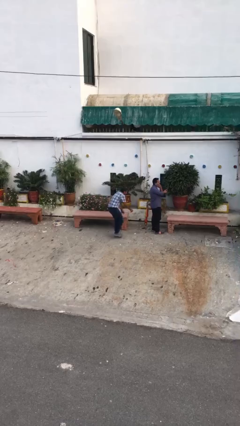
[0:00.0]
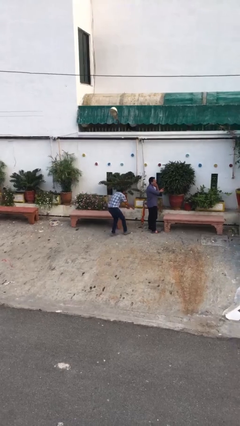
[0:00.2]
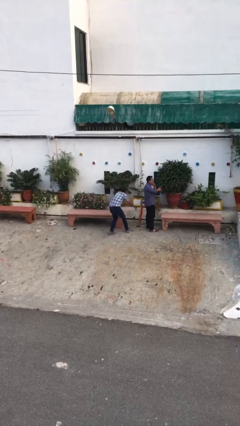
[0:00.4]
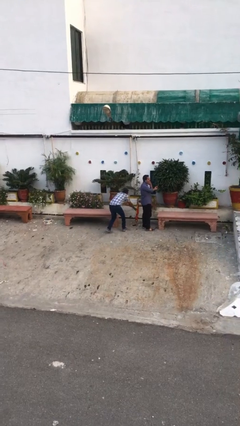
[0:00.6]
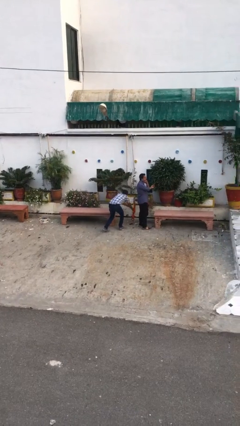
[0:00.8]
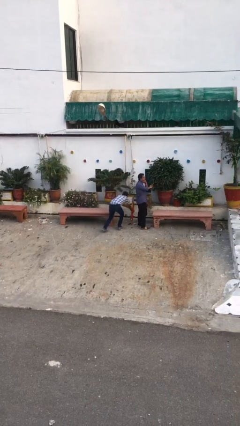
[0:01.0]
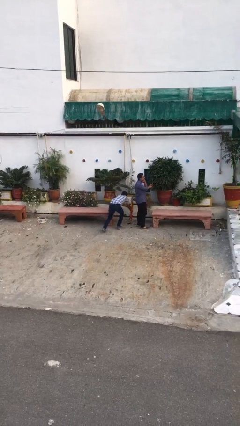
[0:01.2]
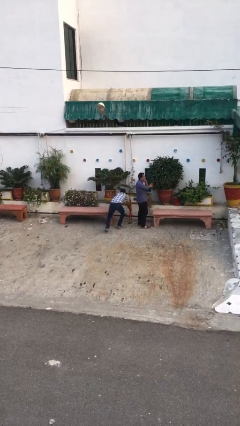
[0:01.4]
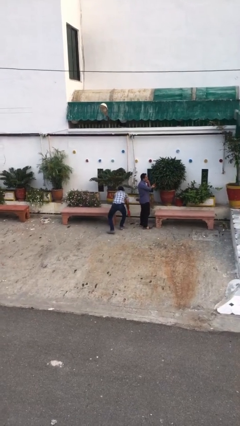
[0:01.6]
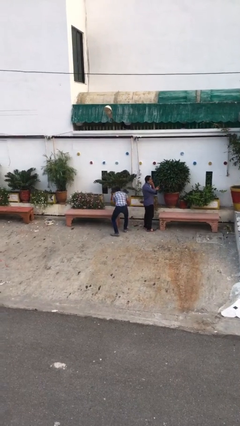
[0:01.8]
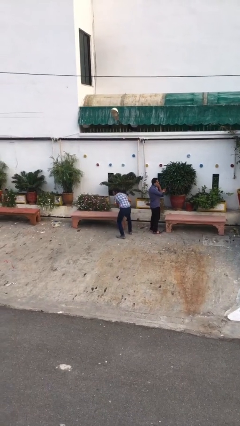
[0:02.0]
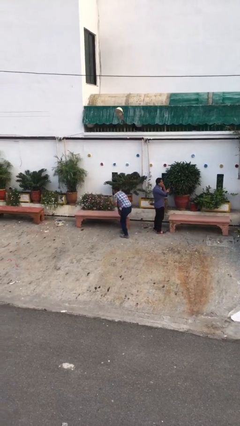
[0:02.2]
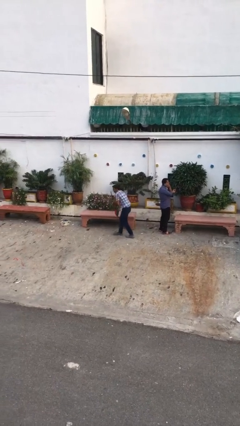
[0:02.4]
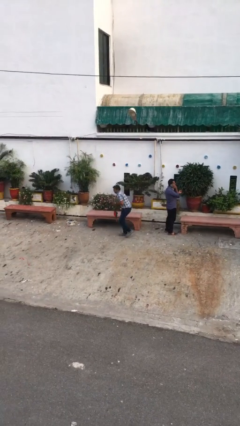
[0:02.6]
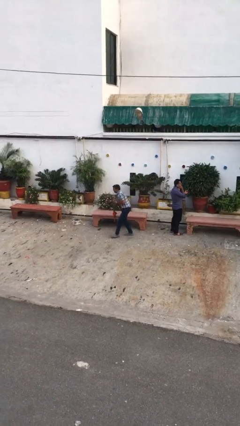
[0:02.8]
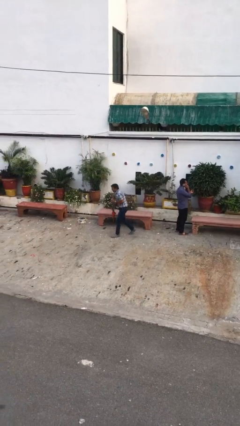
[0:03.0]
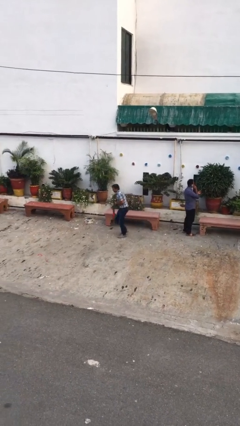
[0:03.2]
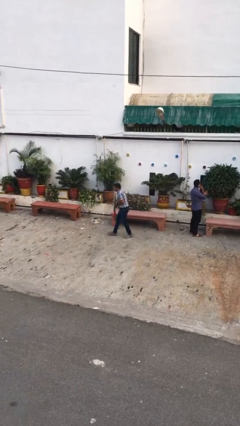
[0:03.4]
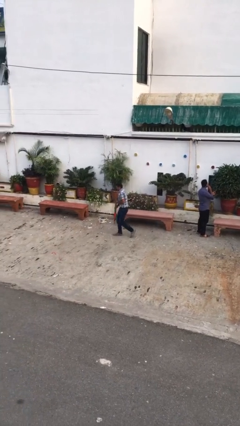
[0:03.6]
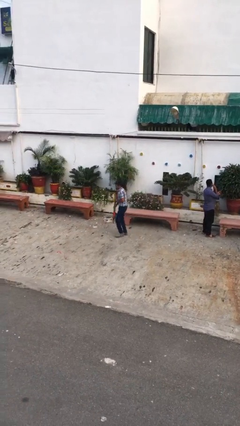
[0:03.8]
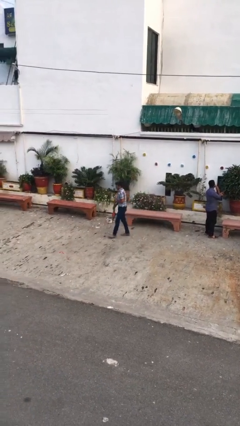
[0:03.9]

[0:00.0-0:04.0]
person transfers object to person

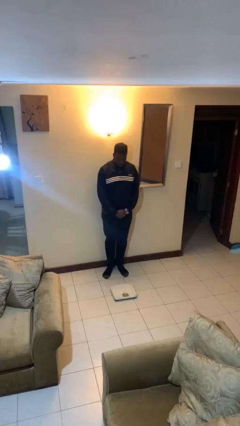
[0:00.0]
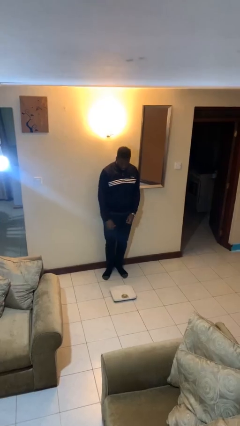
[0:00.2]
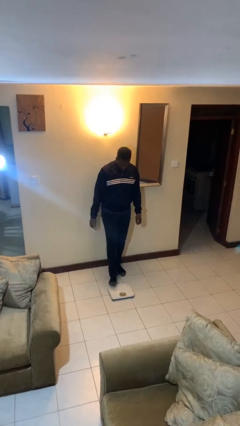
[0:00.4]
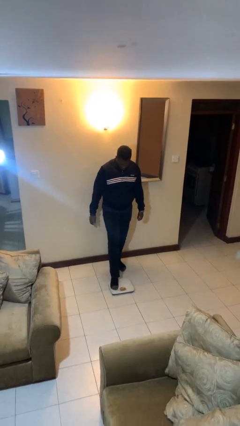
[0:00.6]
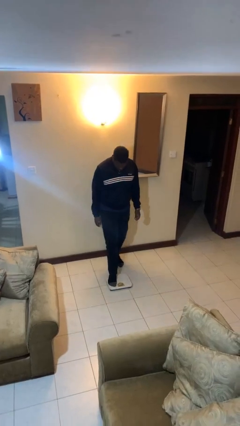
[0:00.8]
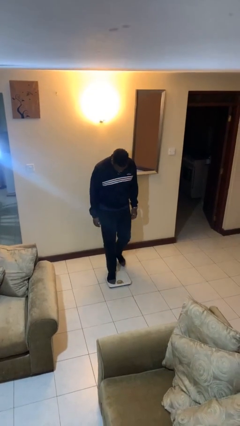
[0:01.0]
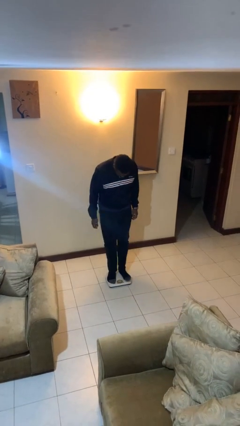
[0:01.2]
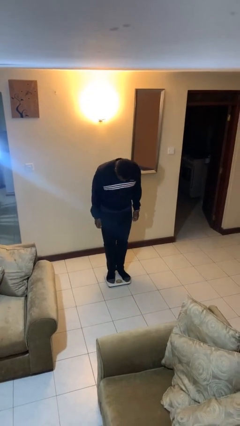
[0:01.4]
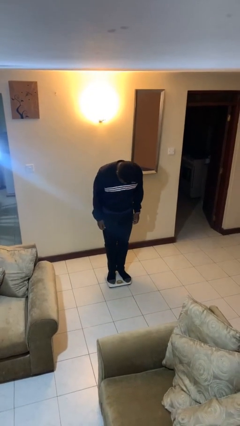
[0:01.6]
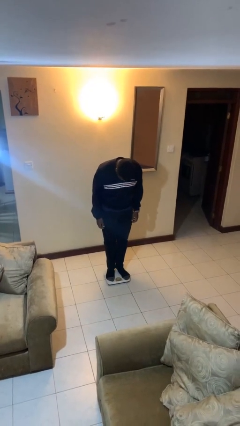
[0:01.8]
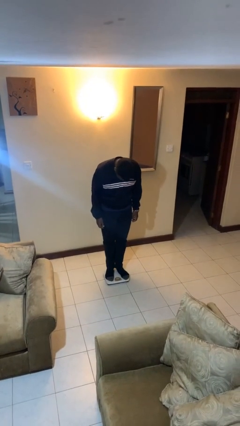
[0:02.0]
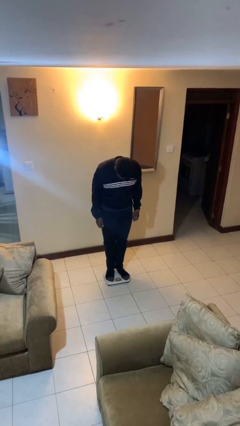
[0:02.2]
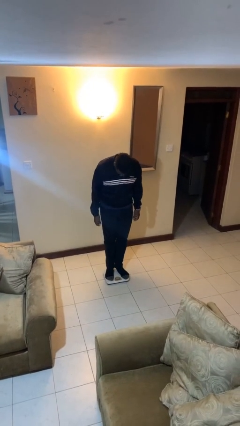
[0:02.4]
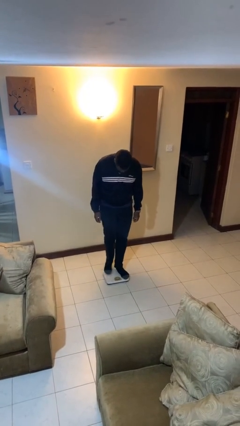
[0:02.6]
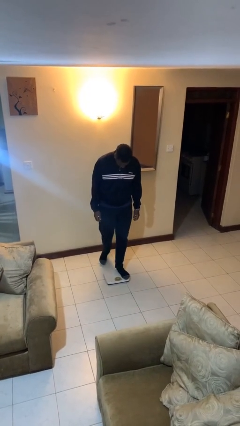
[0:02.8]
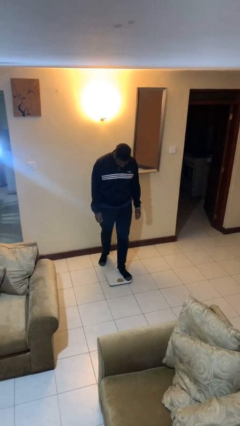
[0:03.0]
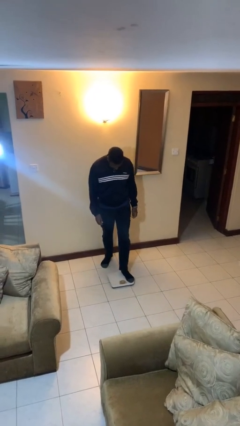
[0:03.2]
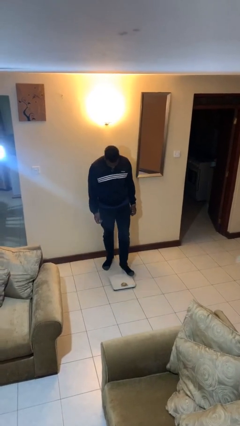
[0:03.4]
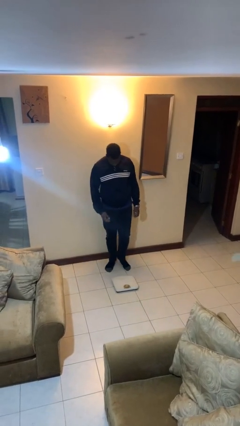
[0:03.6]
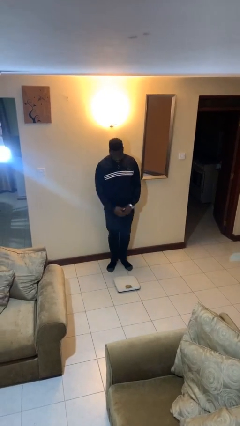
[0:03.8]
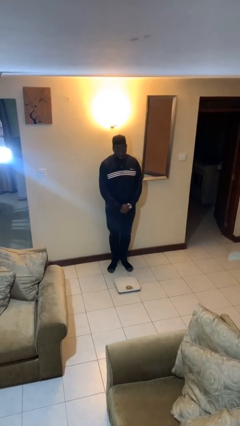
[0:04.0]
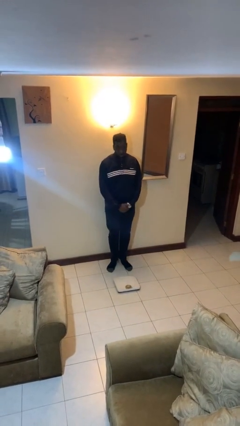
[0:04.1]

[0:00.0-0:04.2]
person uses bodyweight scale

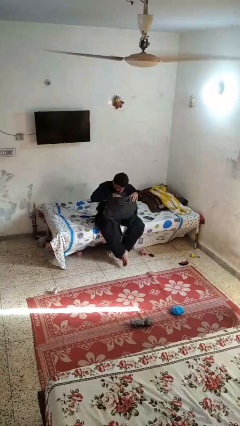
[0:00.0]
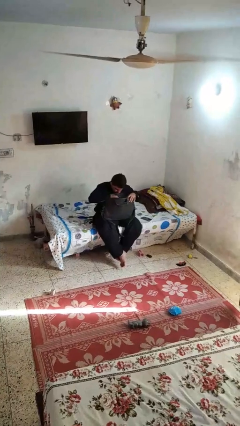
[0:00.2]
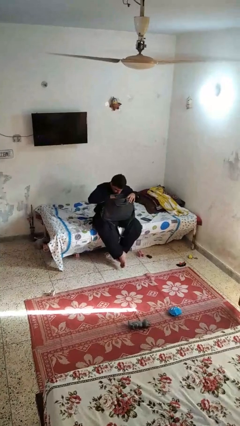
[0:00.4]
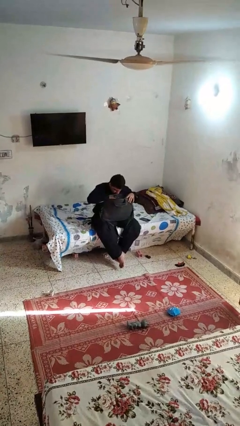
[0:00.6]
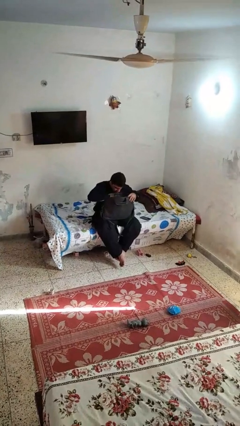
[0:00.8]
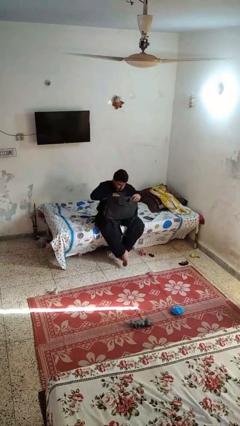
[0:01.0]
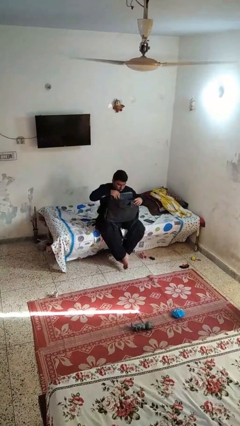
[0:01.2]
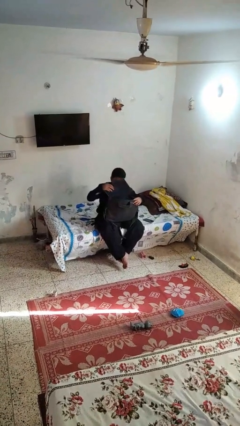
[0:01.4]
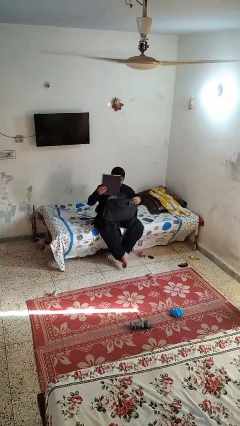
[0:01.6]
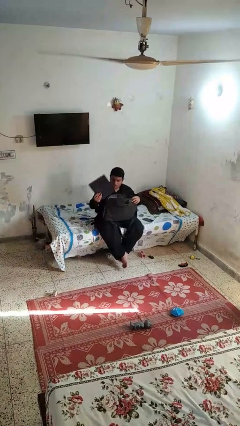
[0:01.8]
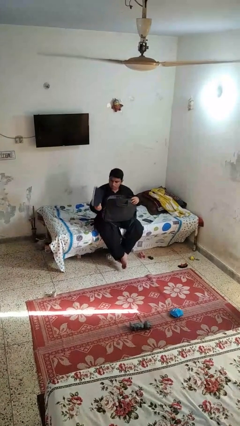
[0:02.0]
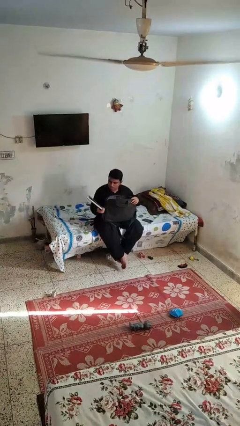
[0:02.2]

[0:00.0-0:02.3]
person takes object from backpack

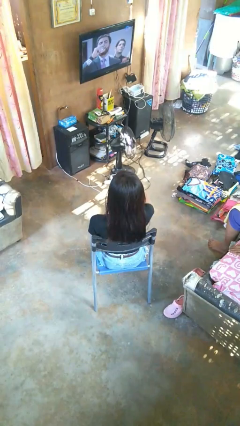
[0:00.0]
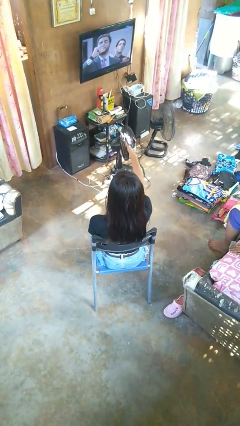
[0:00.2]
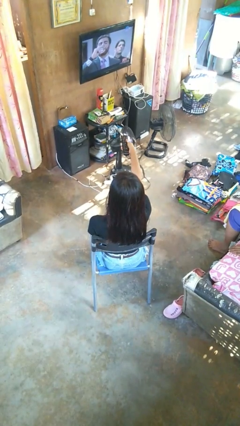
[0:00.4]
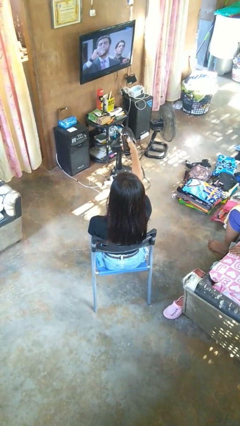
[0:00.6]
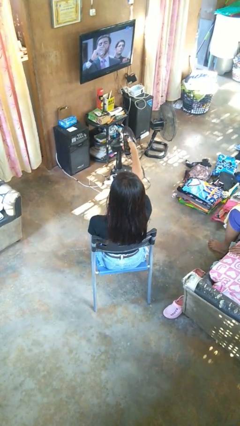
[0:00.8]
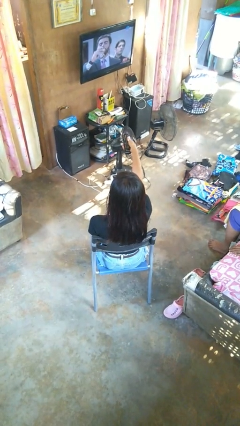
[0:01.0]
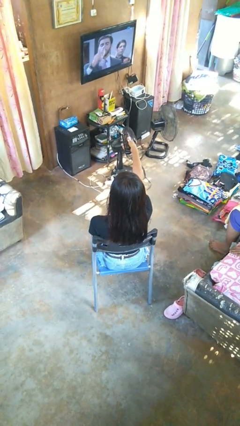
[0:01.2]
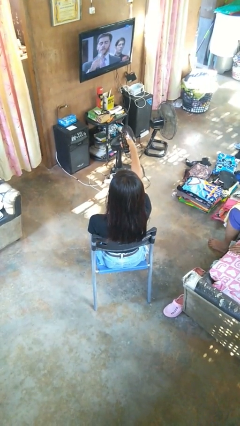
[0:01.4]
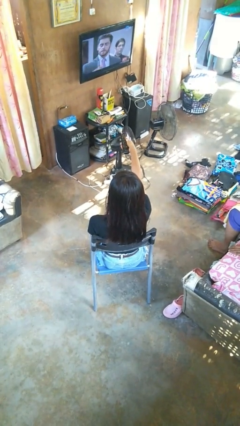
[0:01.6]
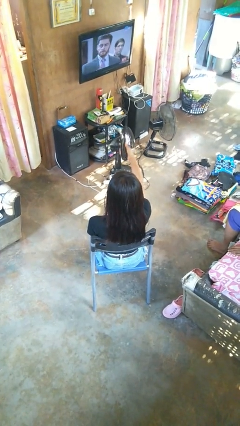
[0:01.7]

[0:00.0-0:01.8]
person uses television remote

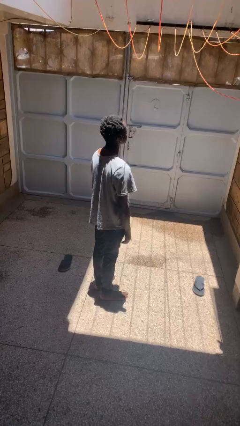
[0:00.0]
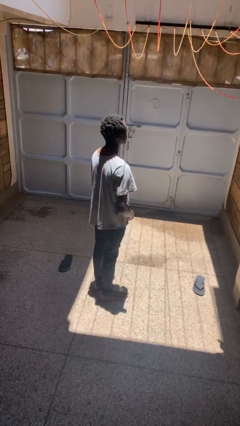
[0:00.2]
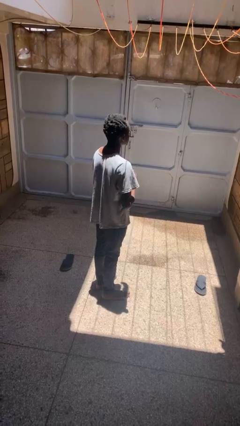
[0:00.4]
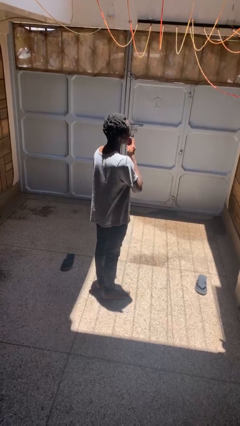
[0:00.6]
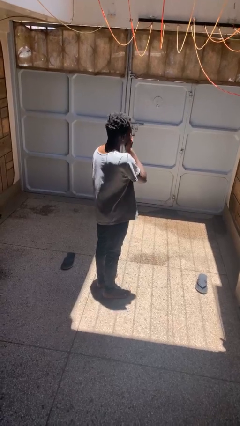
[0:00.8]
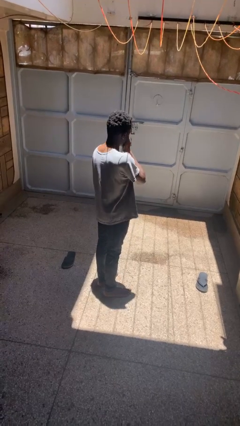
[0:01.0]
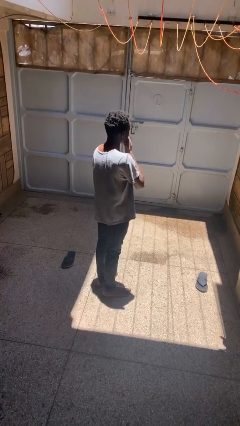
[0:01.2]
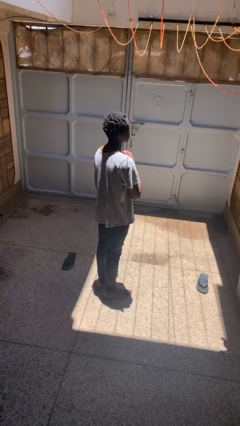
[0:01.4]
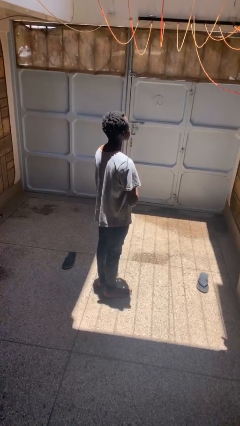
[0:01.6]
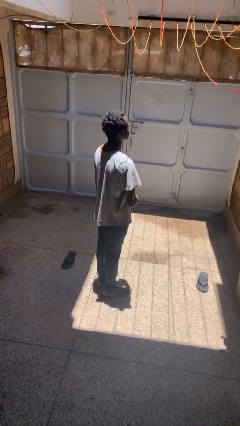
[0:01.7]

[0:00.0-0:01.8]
person sneezes into hand

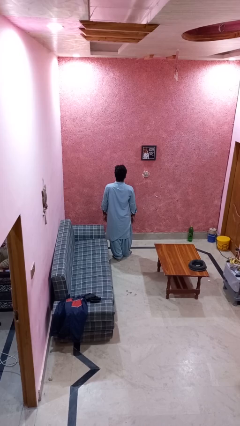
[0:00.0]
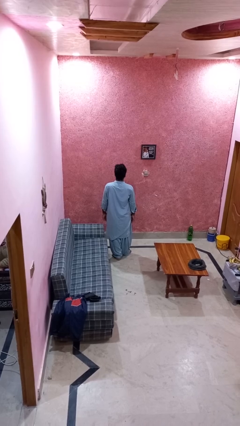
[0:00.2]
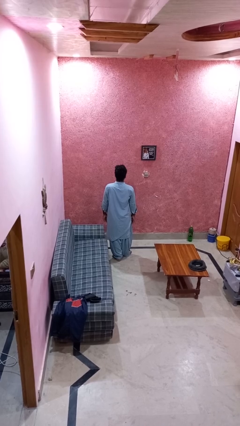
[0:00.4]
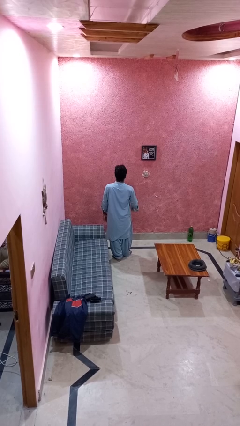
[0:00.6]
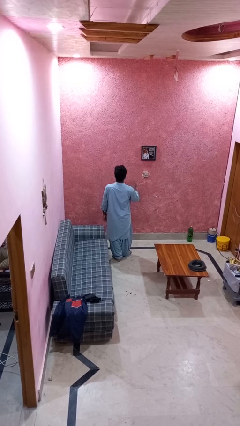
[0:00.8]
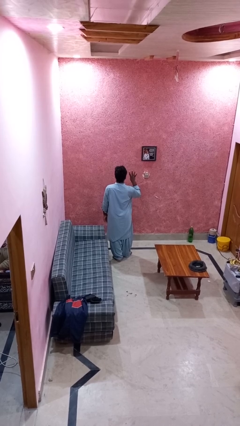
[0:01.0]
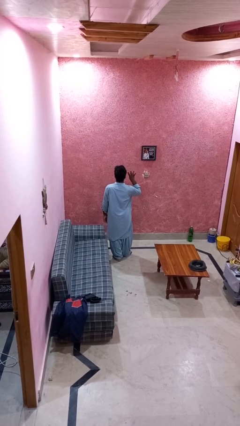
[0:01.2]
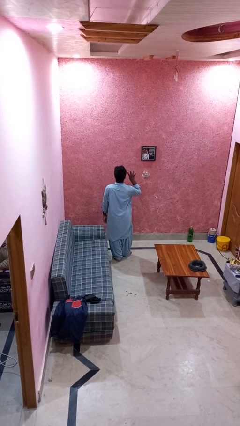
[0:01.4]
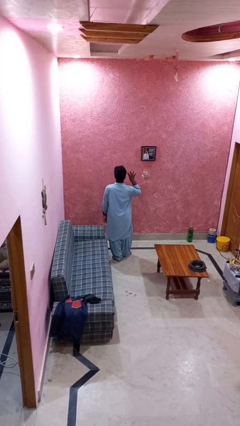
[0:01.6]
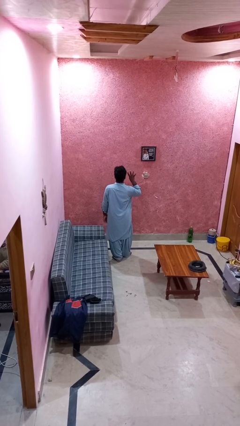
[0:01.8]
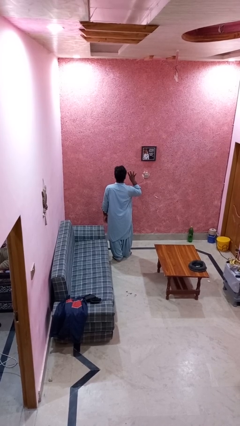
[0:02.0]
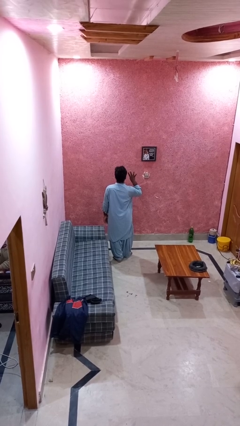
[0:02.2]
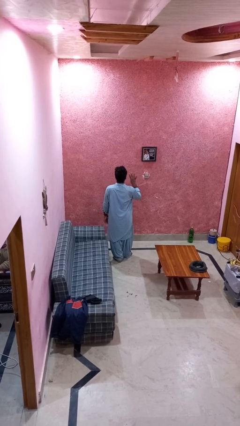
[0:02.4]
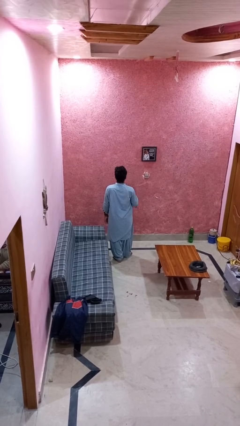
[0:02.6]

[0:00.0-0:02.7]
person gestures number four

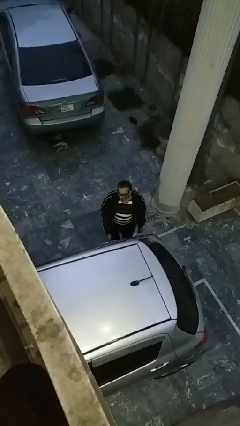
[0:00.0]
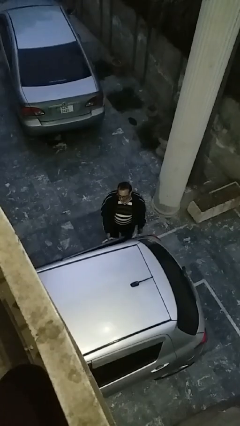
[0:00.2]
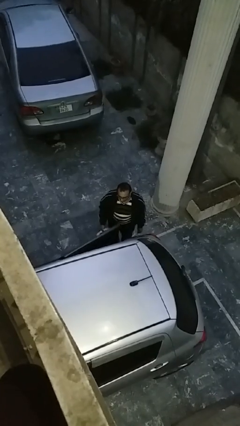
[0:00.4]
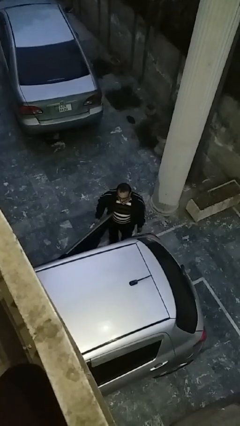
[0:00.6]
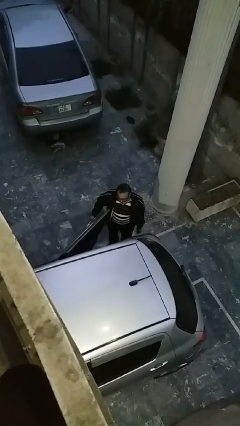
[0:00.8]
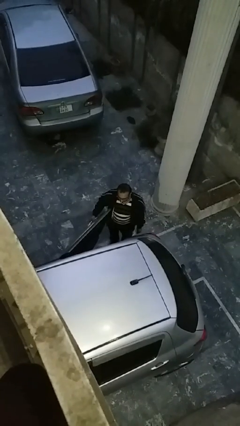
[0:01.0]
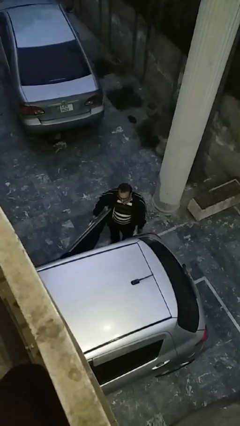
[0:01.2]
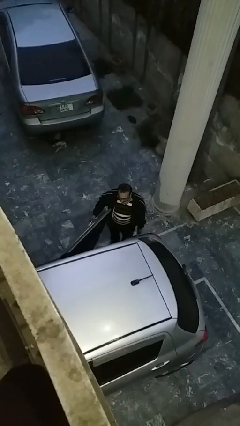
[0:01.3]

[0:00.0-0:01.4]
person opens car door
